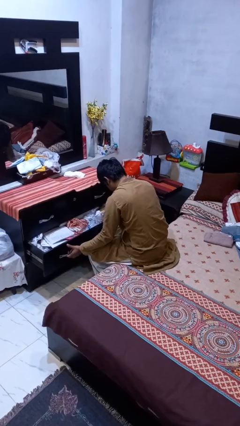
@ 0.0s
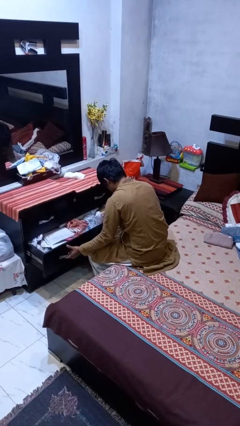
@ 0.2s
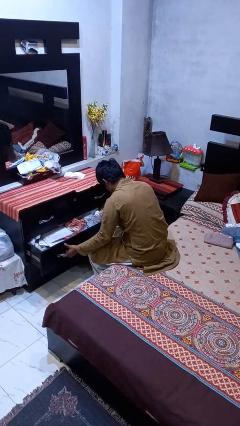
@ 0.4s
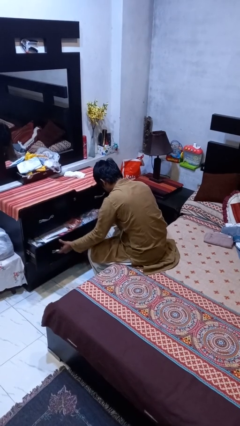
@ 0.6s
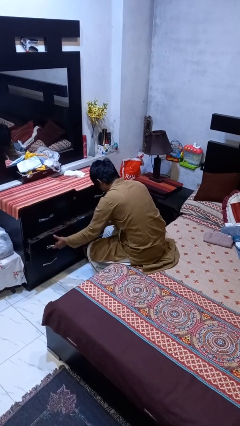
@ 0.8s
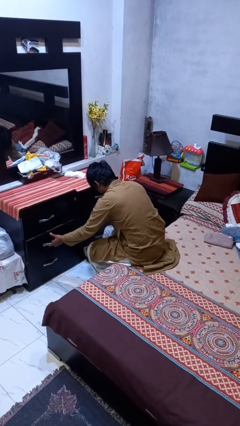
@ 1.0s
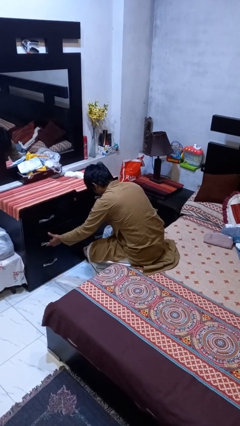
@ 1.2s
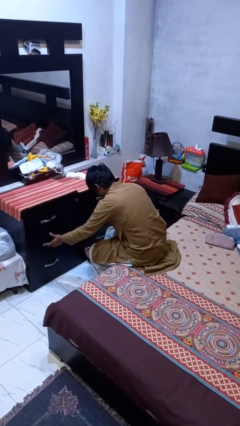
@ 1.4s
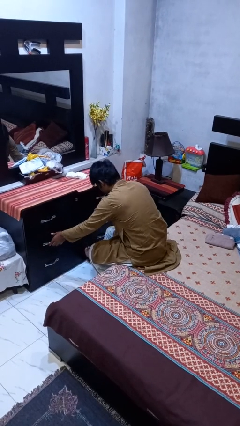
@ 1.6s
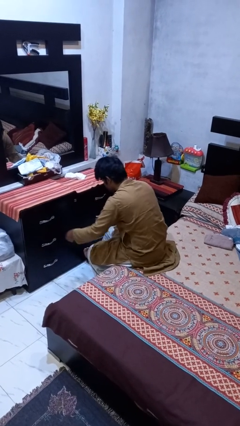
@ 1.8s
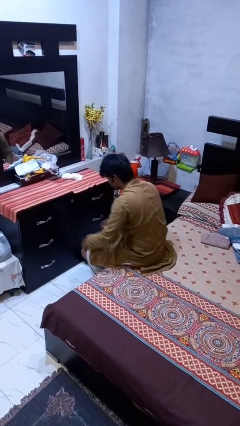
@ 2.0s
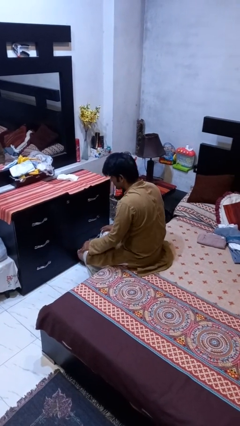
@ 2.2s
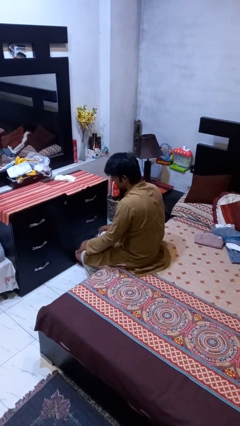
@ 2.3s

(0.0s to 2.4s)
person closes dresser drawer

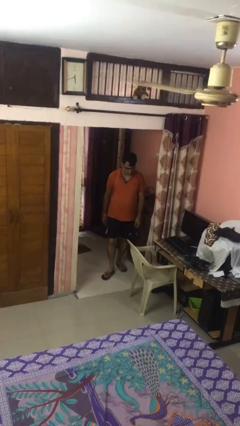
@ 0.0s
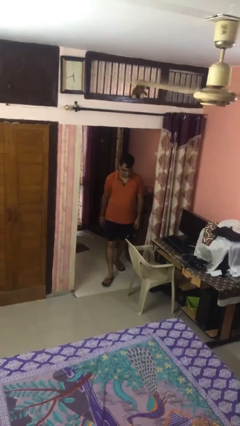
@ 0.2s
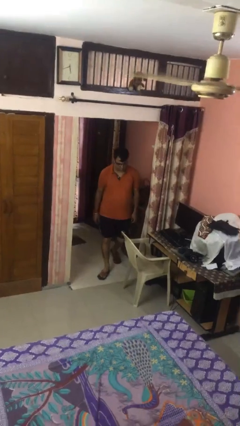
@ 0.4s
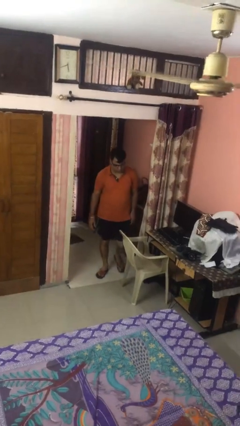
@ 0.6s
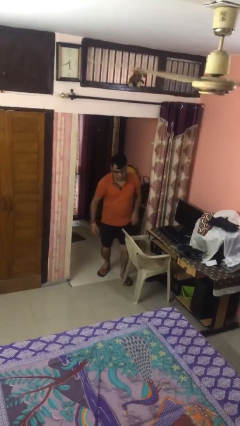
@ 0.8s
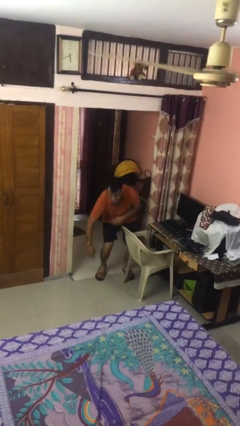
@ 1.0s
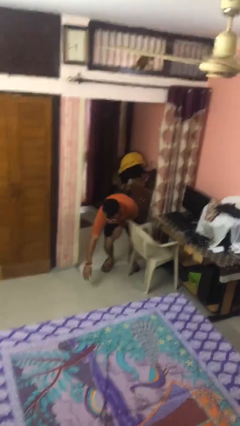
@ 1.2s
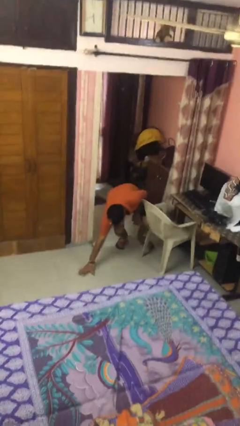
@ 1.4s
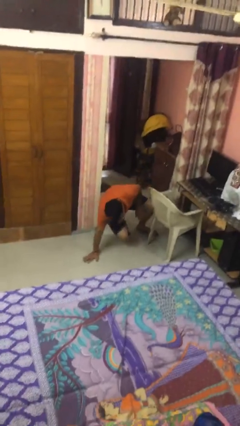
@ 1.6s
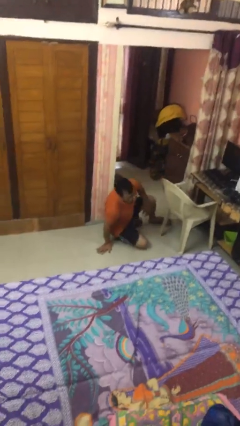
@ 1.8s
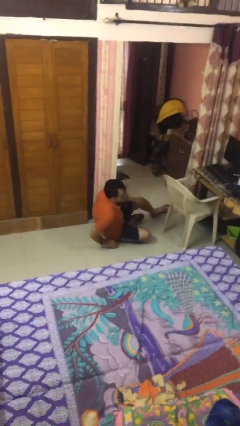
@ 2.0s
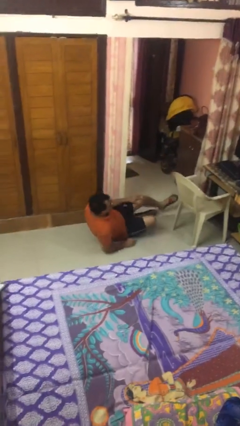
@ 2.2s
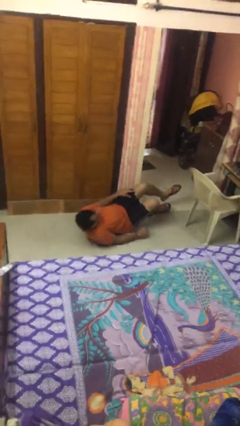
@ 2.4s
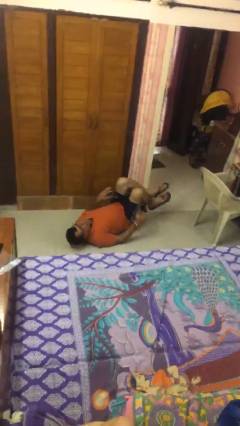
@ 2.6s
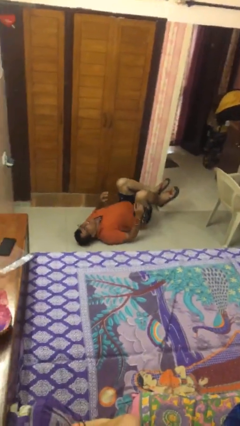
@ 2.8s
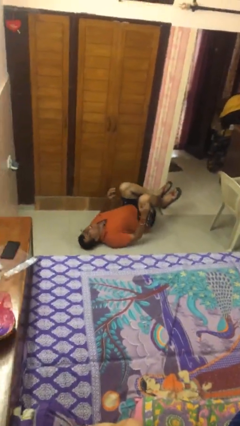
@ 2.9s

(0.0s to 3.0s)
person trips on object on floor

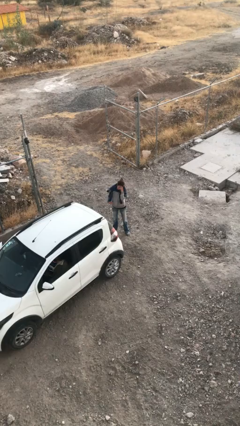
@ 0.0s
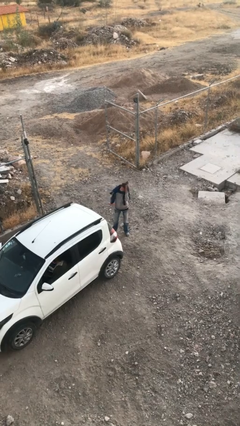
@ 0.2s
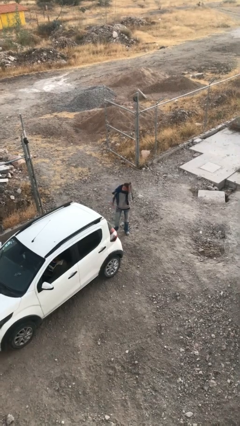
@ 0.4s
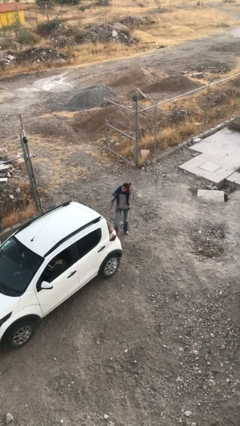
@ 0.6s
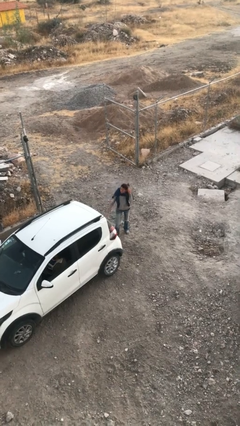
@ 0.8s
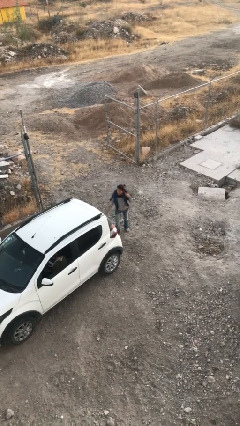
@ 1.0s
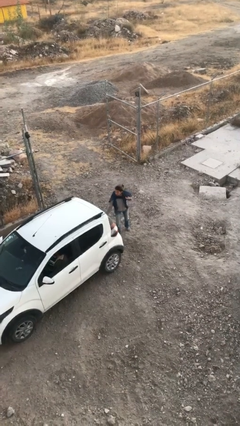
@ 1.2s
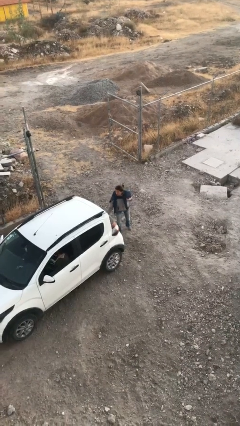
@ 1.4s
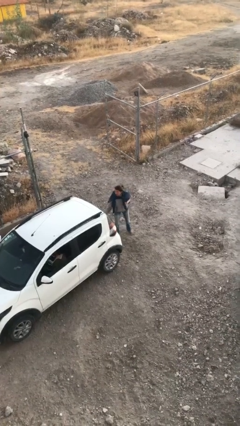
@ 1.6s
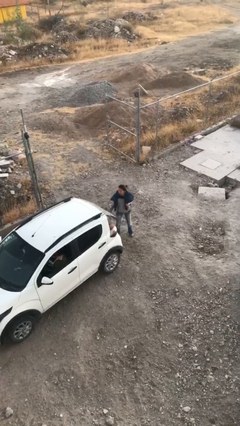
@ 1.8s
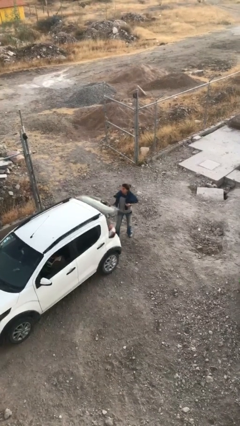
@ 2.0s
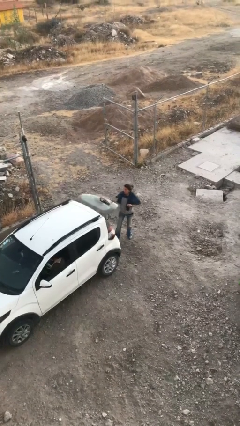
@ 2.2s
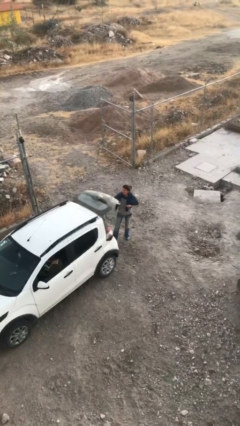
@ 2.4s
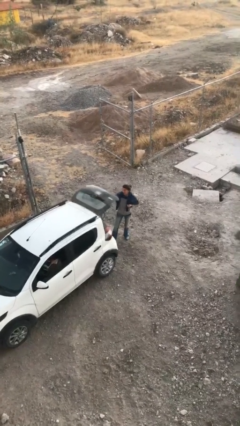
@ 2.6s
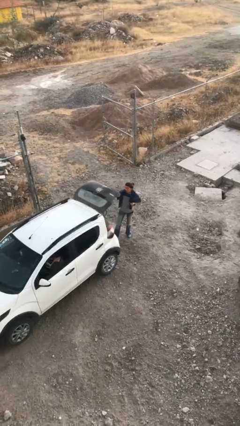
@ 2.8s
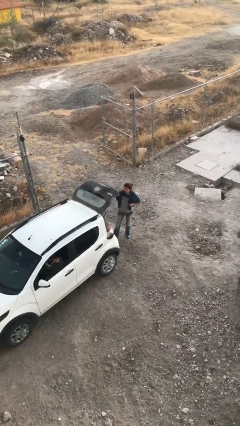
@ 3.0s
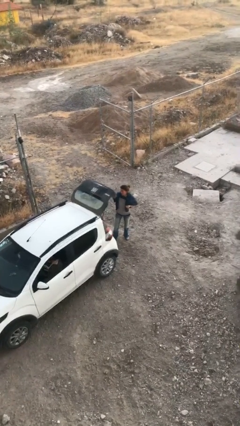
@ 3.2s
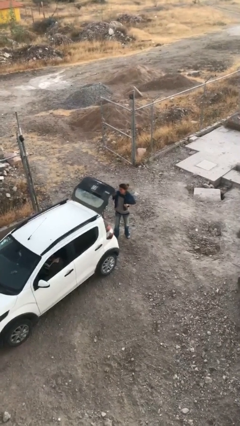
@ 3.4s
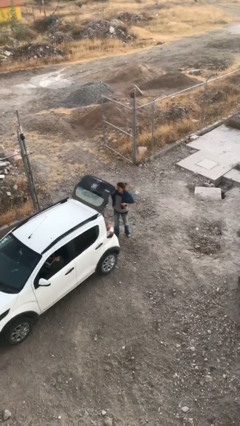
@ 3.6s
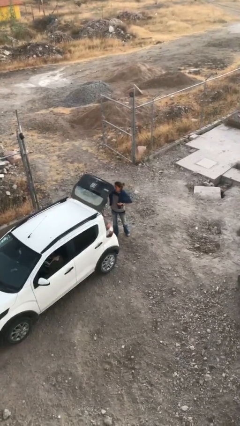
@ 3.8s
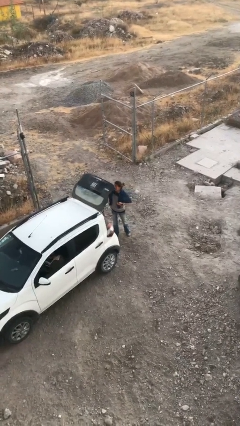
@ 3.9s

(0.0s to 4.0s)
person opens car trunk

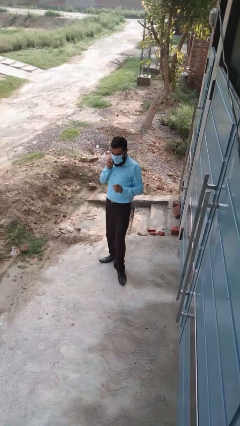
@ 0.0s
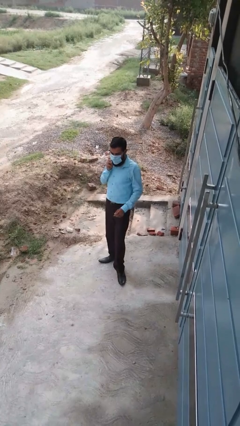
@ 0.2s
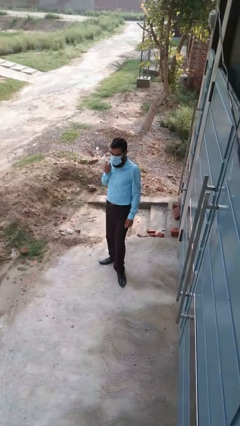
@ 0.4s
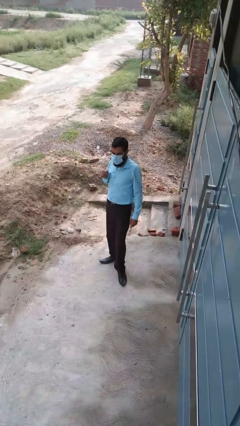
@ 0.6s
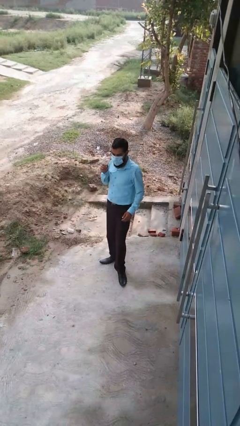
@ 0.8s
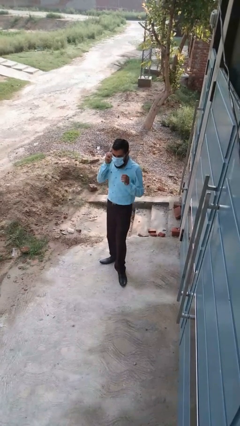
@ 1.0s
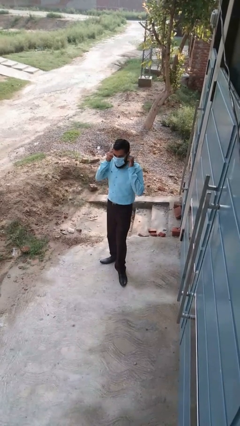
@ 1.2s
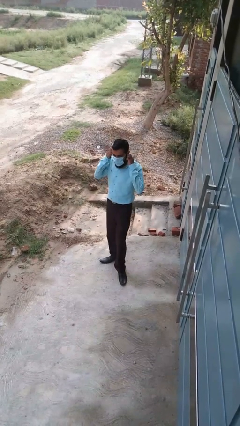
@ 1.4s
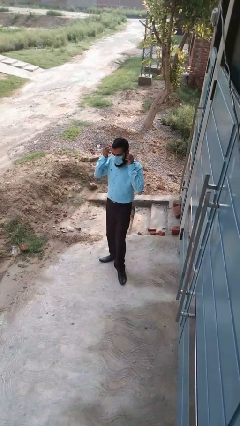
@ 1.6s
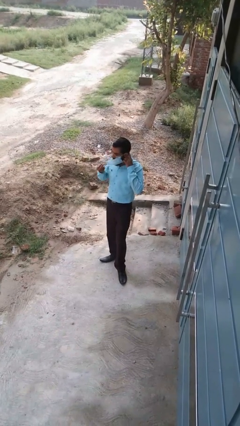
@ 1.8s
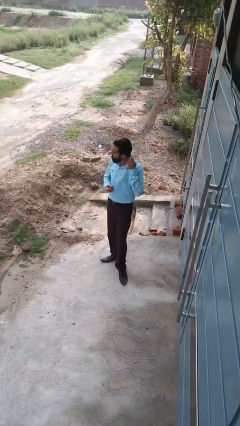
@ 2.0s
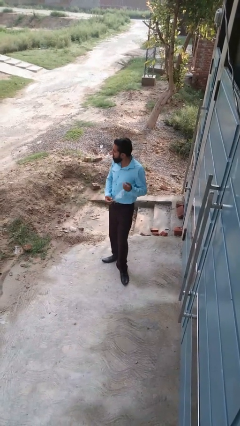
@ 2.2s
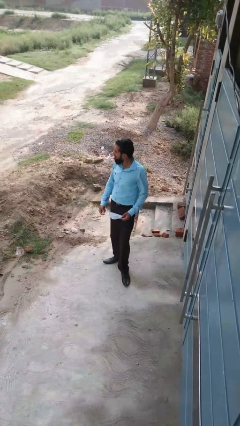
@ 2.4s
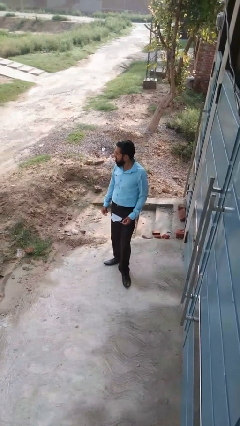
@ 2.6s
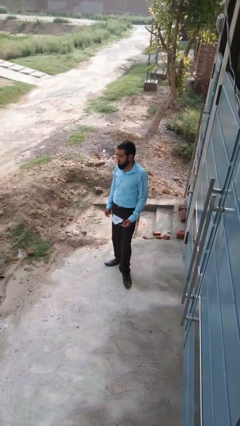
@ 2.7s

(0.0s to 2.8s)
person takes off facemask

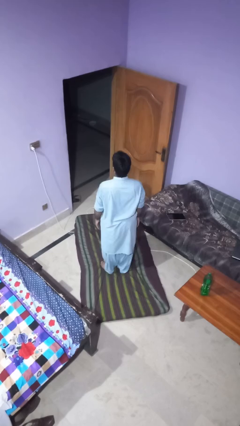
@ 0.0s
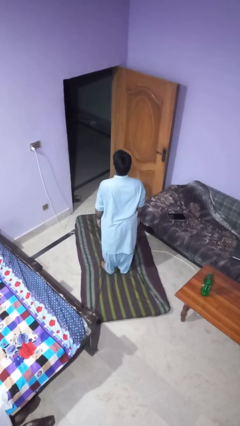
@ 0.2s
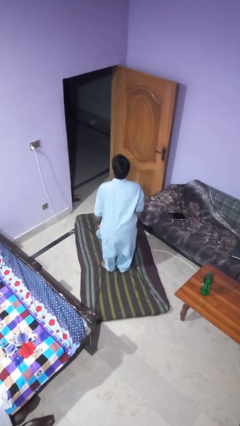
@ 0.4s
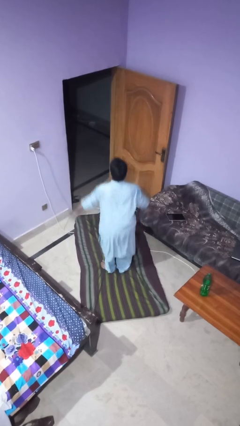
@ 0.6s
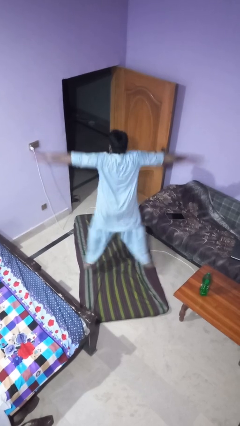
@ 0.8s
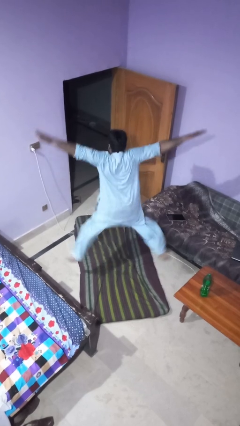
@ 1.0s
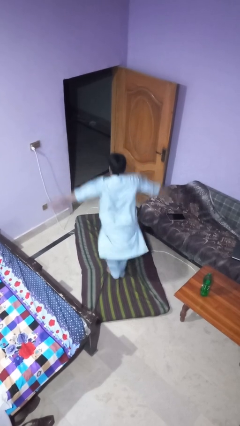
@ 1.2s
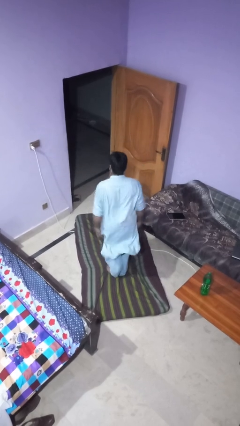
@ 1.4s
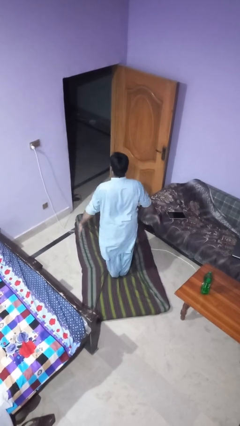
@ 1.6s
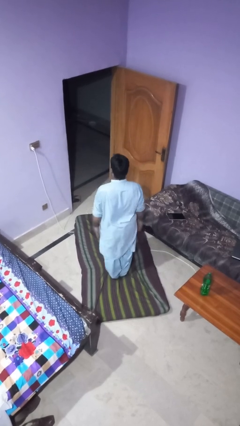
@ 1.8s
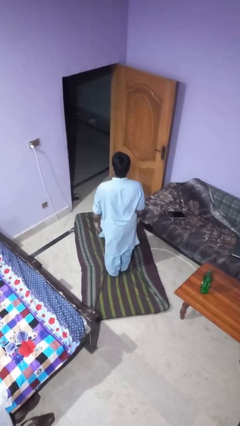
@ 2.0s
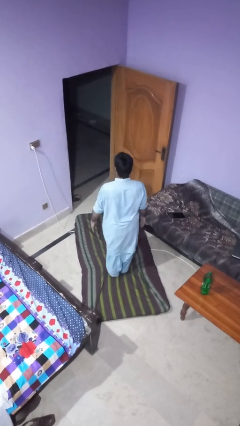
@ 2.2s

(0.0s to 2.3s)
person exercises with jumping jacks

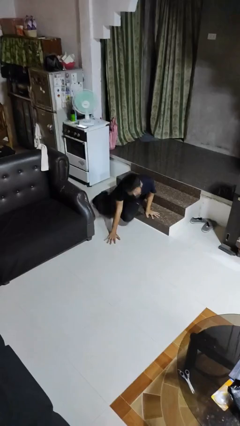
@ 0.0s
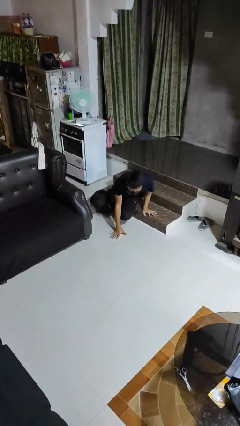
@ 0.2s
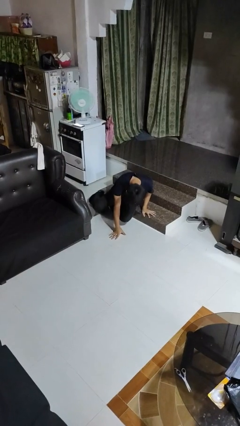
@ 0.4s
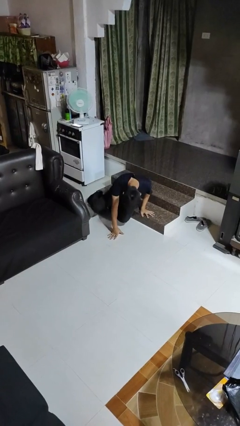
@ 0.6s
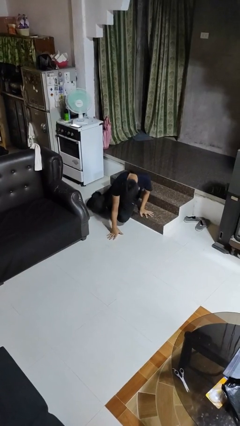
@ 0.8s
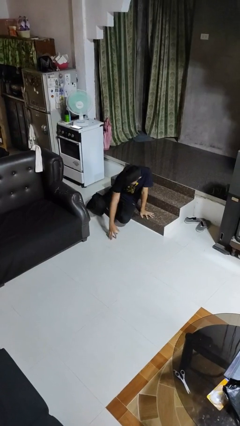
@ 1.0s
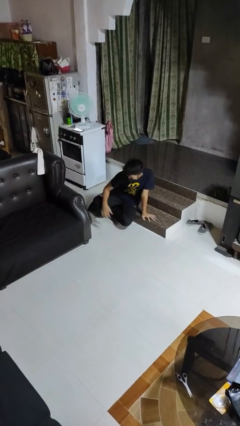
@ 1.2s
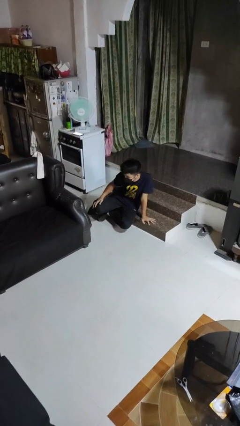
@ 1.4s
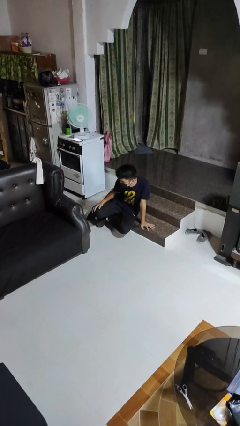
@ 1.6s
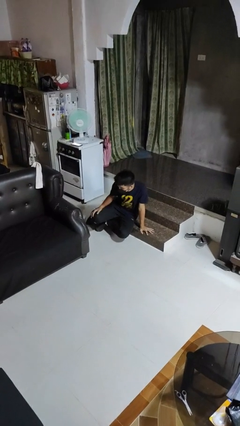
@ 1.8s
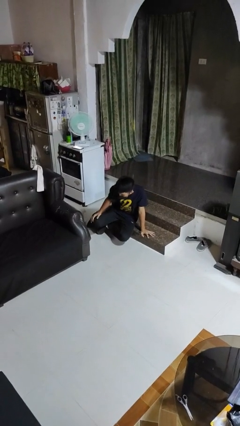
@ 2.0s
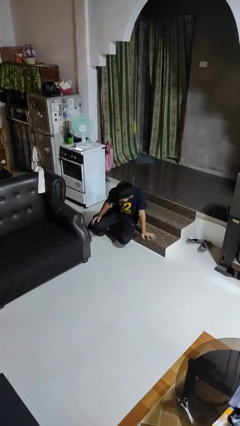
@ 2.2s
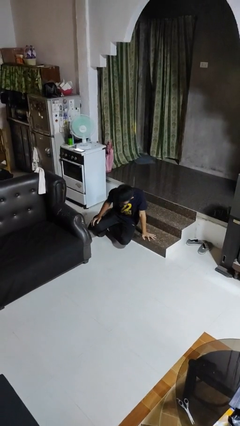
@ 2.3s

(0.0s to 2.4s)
person lies down on floor

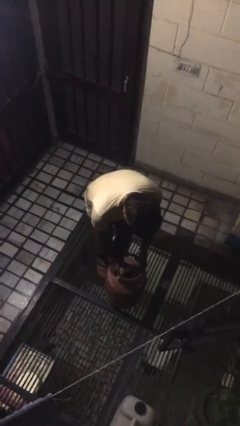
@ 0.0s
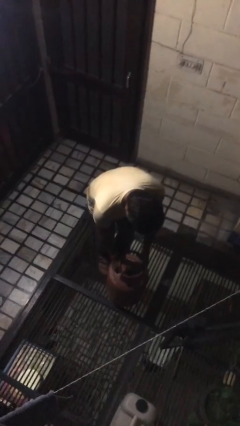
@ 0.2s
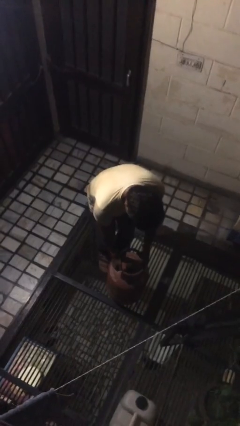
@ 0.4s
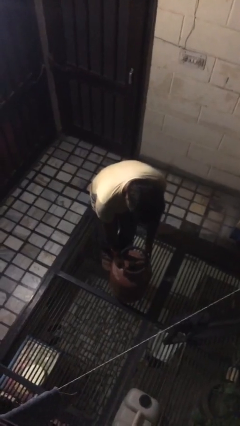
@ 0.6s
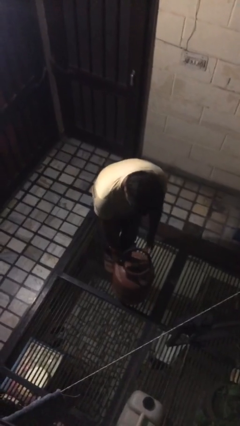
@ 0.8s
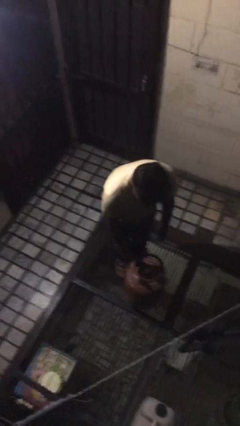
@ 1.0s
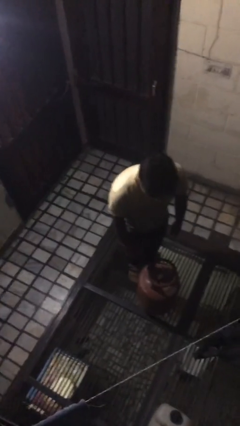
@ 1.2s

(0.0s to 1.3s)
person puts down object on floor
